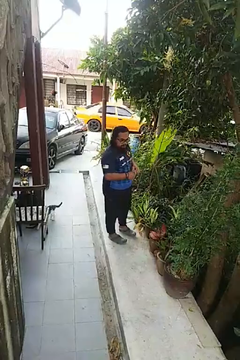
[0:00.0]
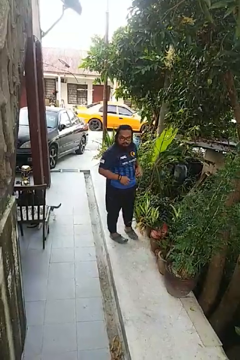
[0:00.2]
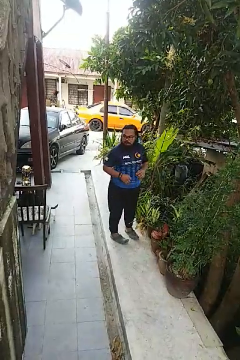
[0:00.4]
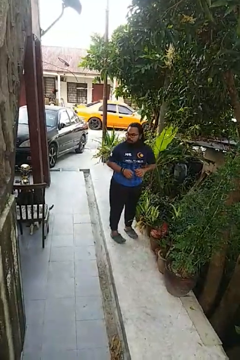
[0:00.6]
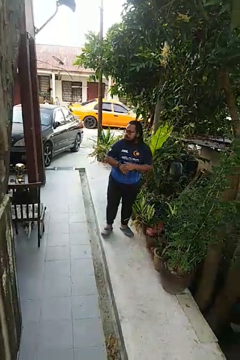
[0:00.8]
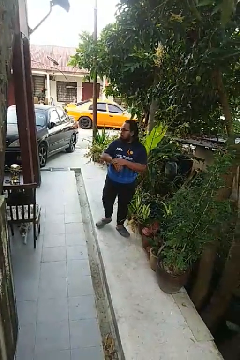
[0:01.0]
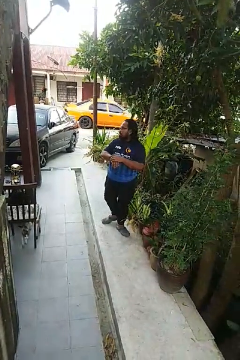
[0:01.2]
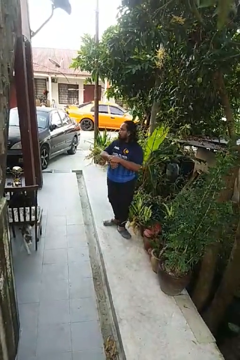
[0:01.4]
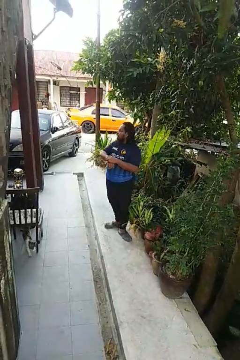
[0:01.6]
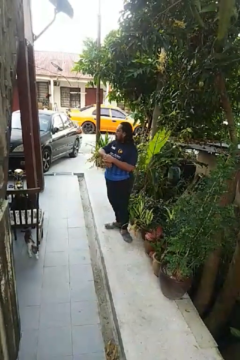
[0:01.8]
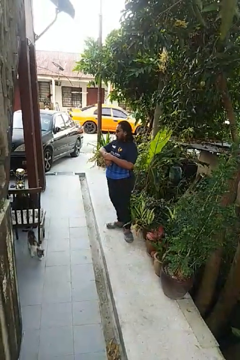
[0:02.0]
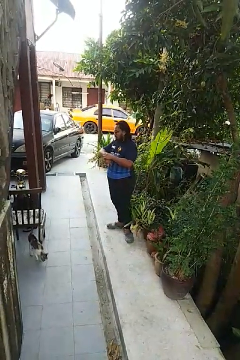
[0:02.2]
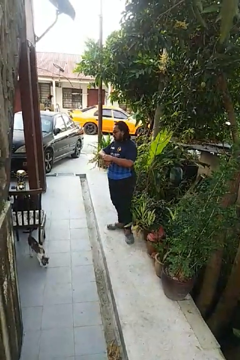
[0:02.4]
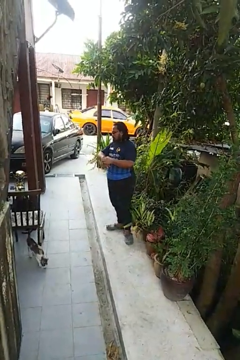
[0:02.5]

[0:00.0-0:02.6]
person looks at wristwatch

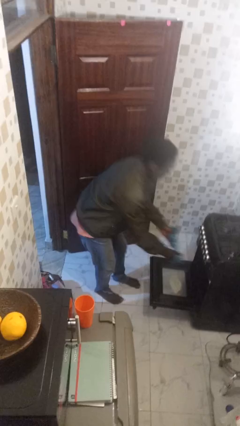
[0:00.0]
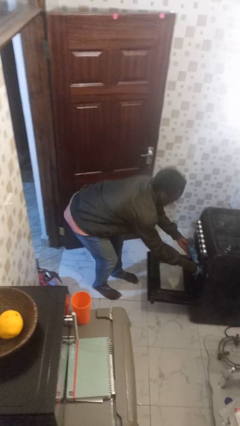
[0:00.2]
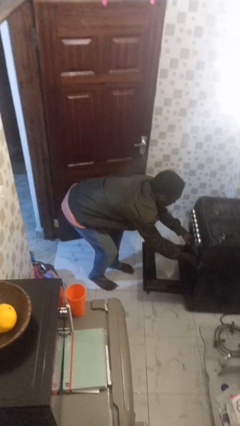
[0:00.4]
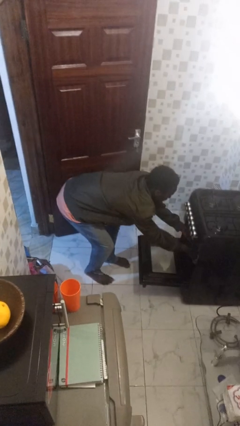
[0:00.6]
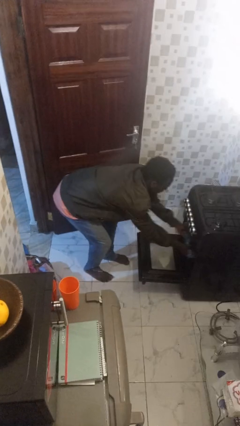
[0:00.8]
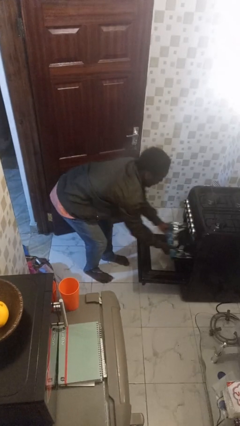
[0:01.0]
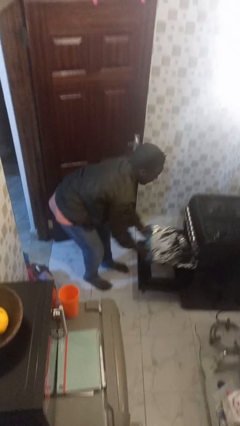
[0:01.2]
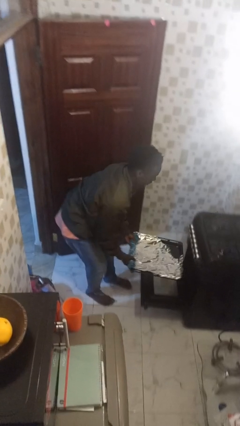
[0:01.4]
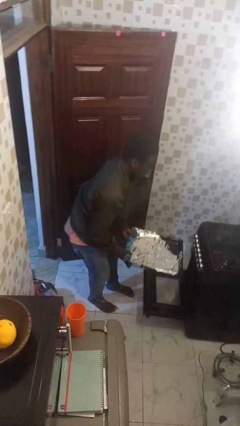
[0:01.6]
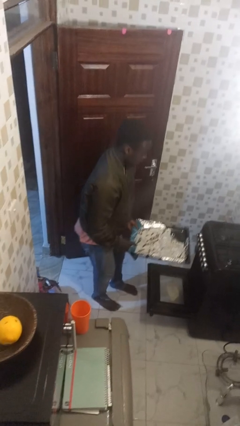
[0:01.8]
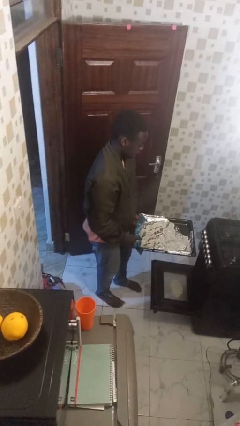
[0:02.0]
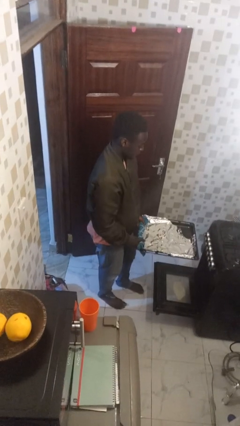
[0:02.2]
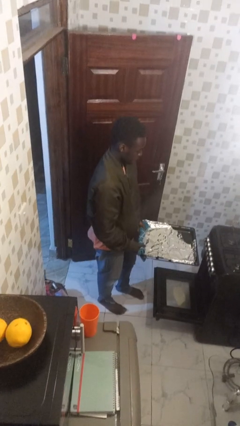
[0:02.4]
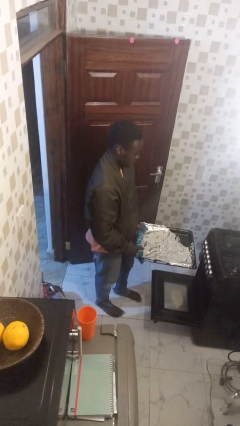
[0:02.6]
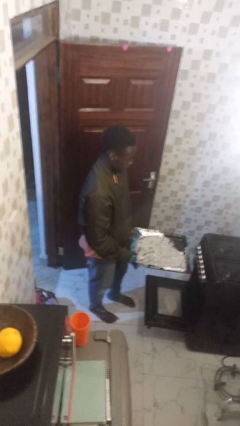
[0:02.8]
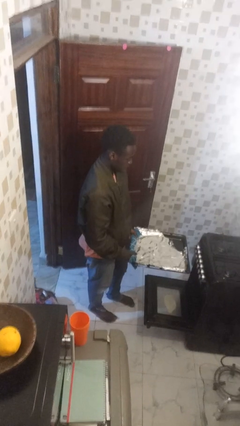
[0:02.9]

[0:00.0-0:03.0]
person takes object from oven

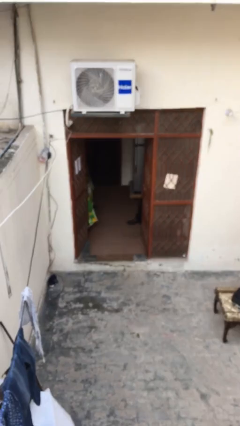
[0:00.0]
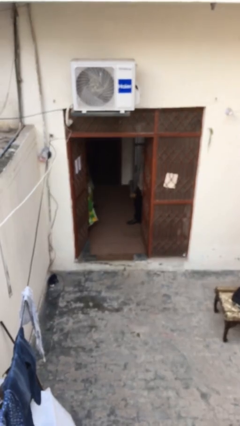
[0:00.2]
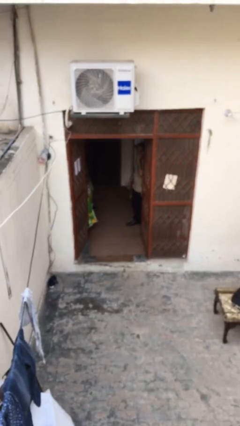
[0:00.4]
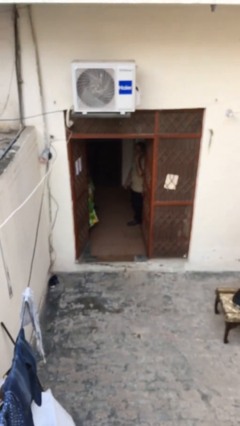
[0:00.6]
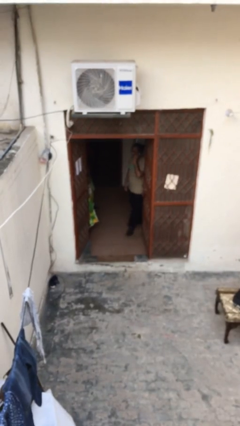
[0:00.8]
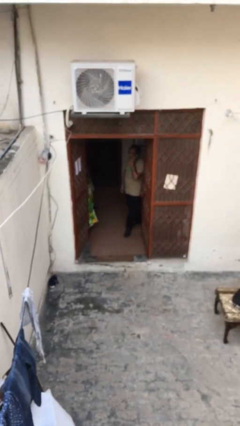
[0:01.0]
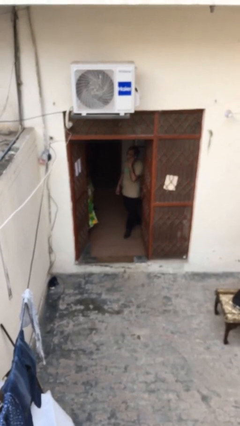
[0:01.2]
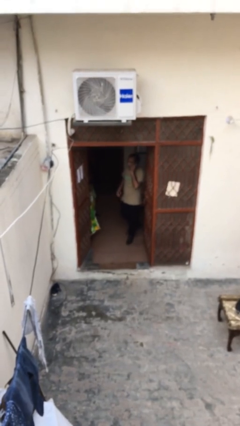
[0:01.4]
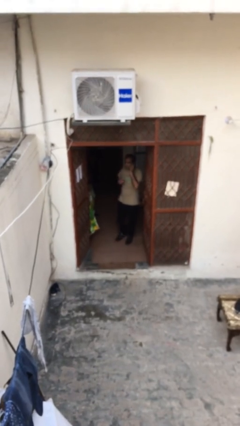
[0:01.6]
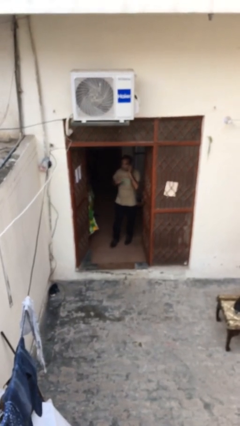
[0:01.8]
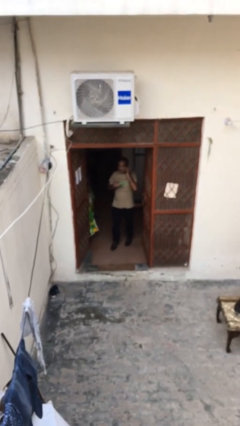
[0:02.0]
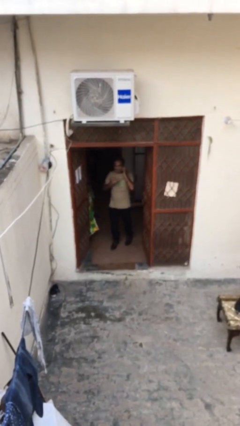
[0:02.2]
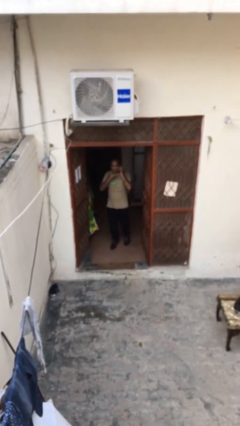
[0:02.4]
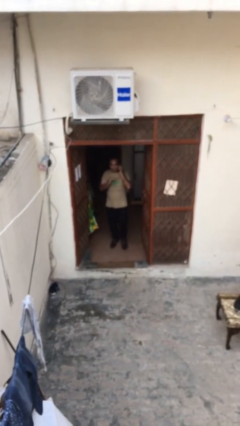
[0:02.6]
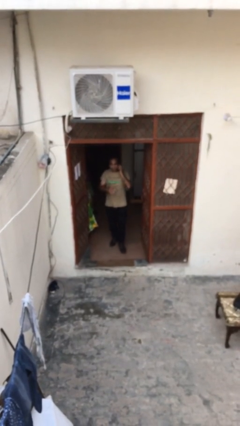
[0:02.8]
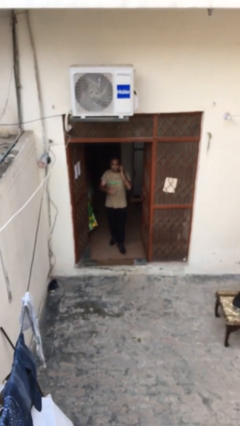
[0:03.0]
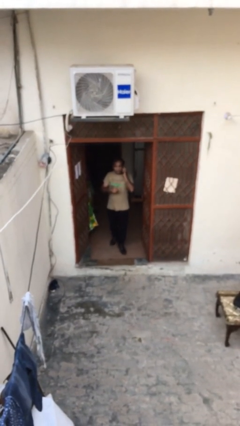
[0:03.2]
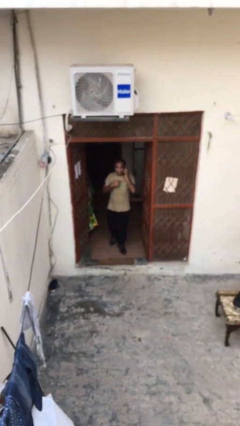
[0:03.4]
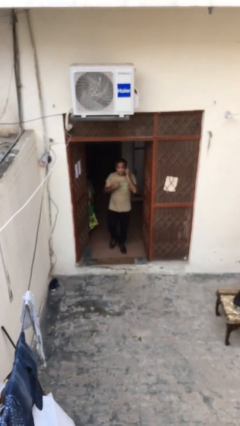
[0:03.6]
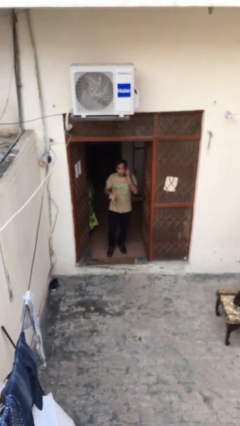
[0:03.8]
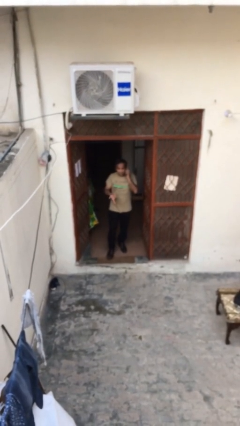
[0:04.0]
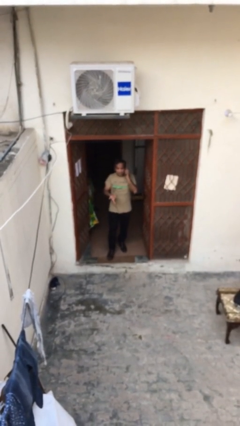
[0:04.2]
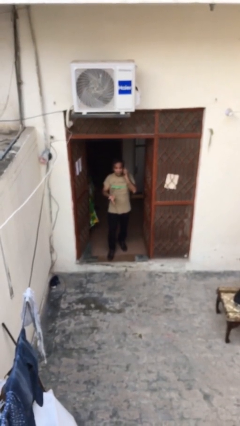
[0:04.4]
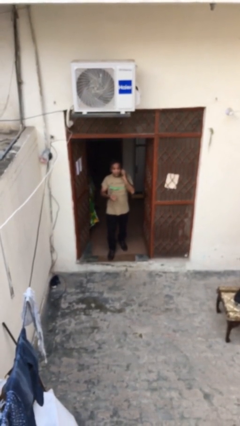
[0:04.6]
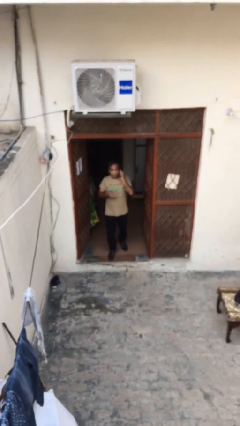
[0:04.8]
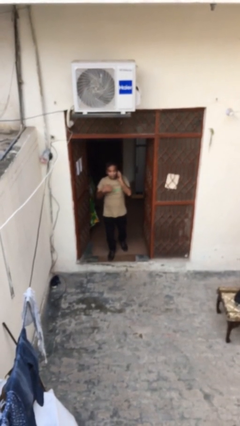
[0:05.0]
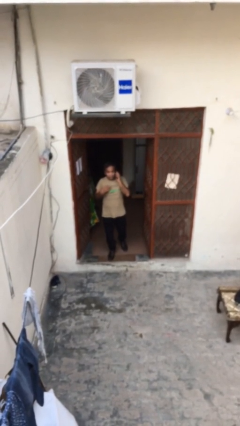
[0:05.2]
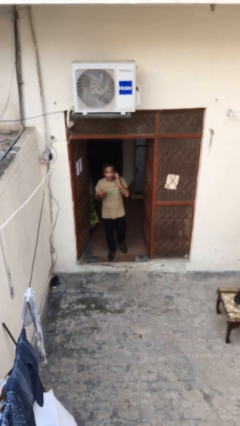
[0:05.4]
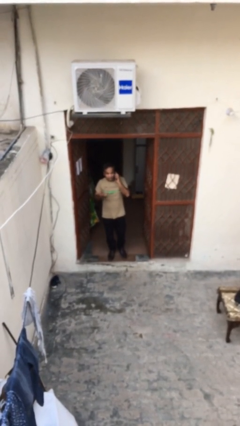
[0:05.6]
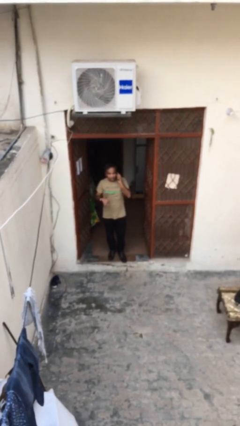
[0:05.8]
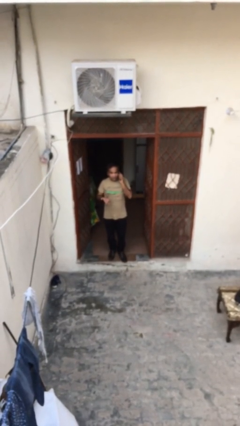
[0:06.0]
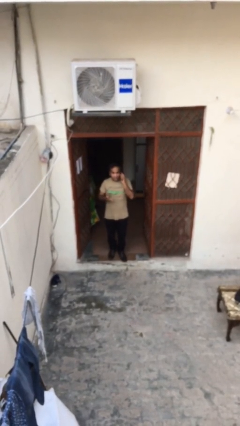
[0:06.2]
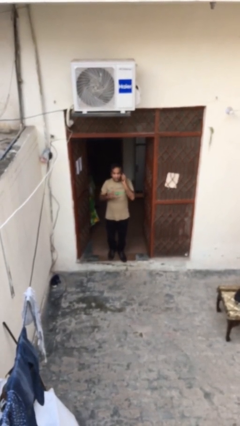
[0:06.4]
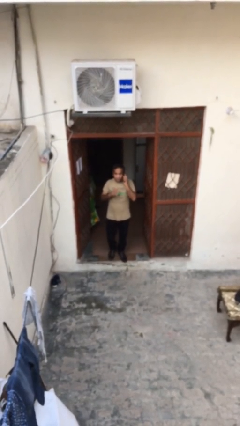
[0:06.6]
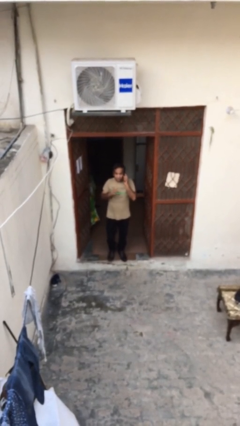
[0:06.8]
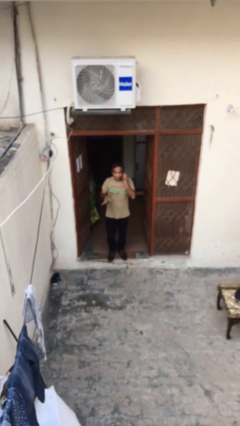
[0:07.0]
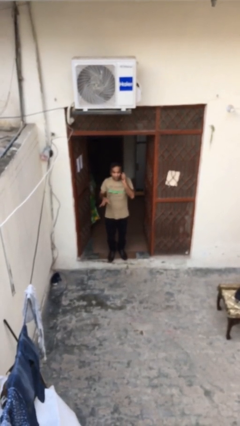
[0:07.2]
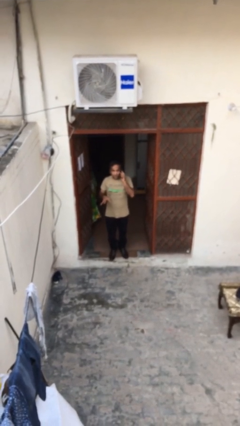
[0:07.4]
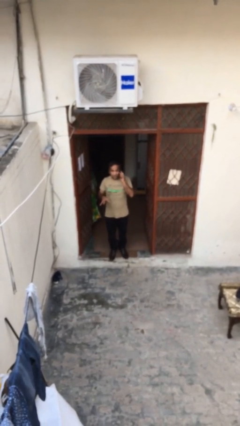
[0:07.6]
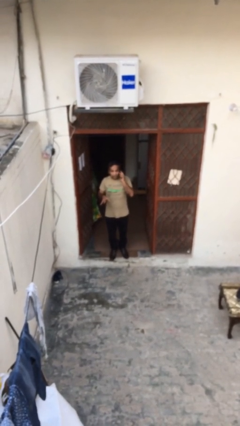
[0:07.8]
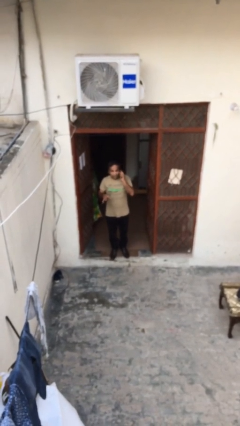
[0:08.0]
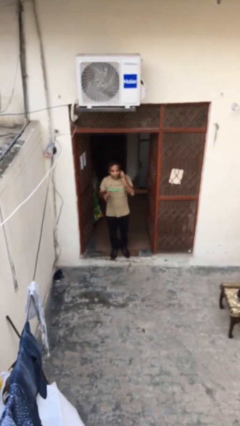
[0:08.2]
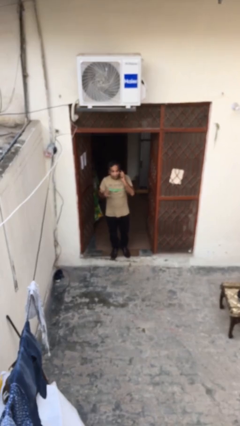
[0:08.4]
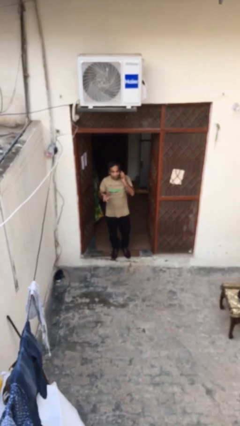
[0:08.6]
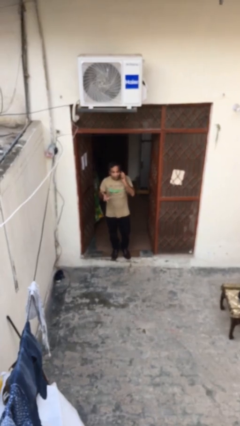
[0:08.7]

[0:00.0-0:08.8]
person enters scene through structure

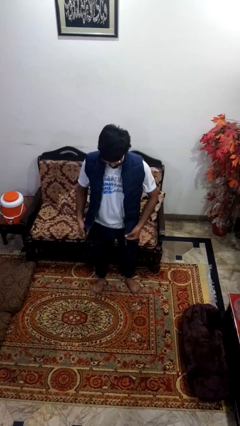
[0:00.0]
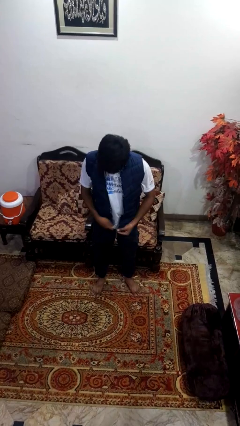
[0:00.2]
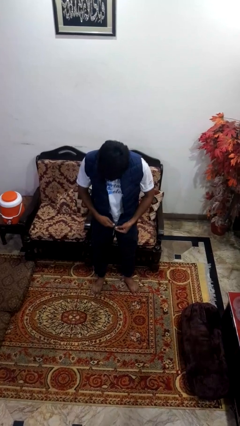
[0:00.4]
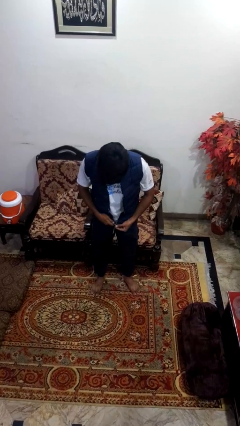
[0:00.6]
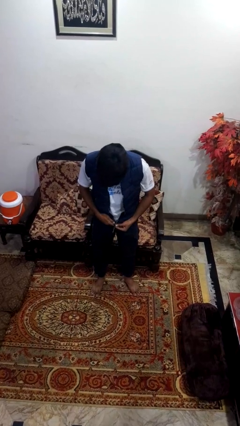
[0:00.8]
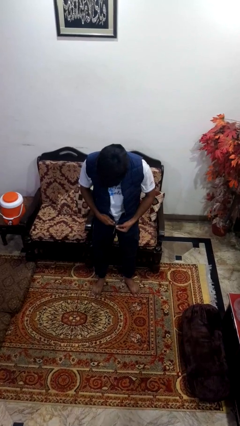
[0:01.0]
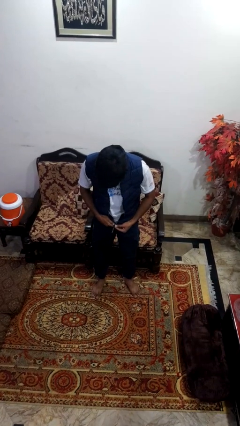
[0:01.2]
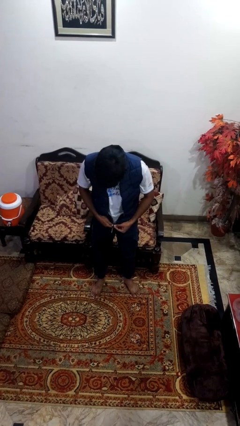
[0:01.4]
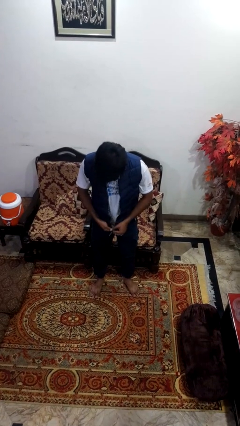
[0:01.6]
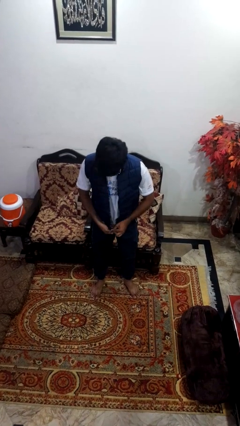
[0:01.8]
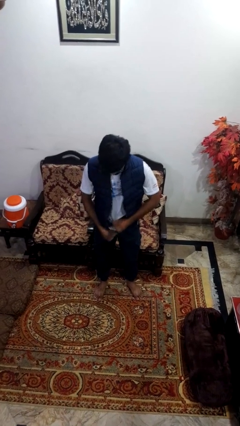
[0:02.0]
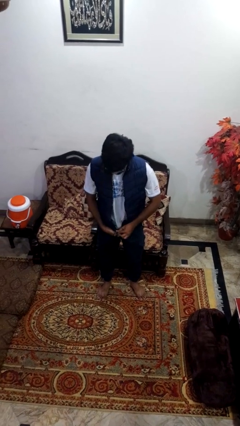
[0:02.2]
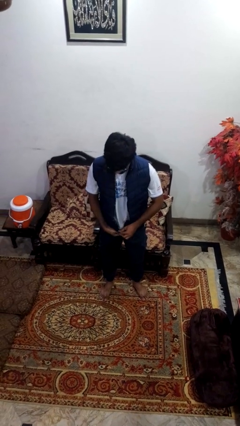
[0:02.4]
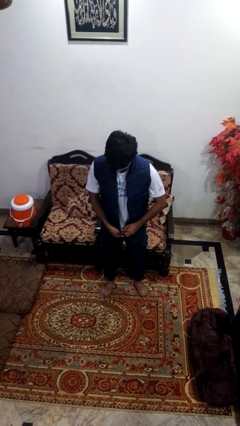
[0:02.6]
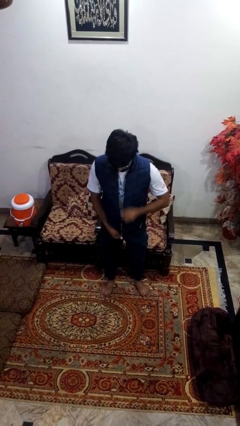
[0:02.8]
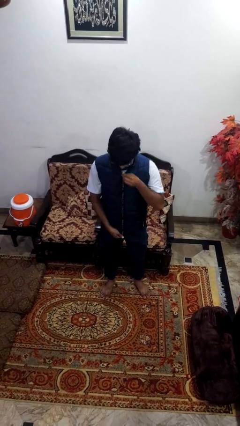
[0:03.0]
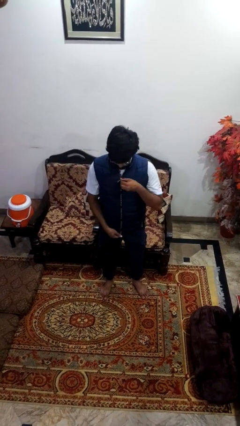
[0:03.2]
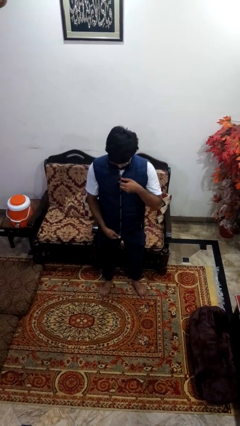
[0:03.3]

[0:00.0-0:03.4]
person zips up jacket
